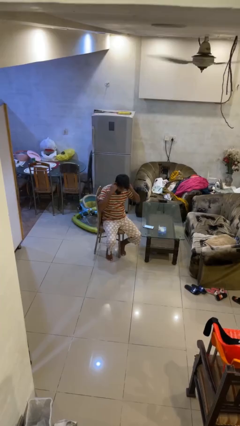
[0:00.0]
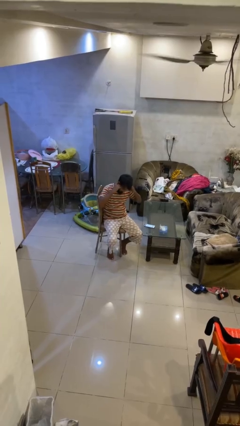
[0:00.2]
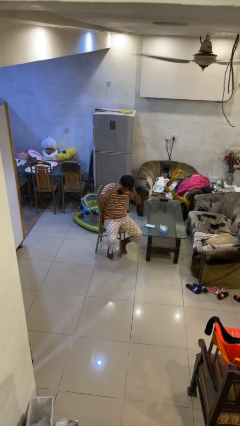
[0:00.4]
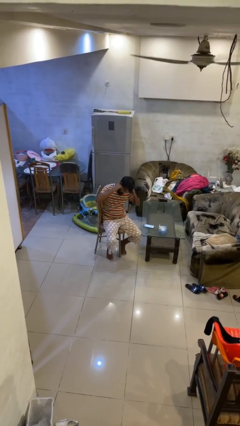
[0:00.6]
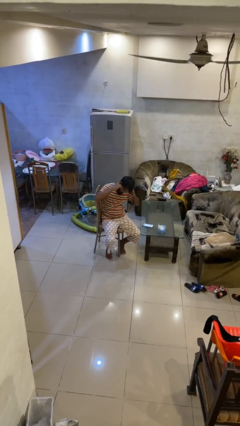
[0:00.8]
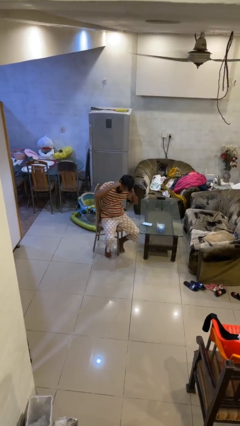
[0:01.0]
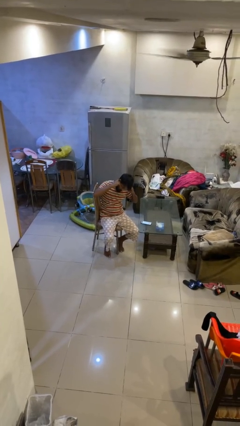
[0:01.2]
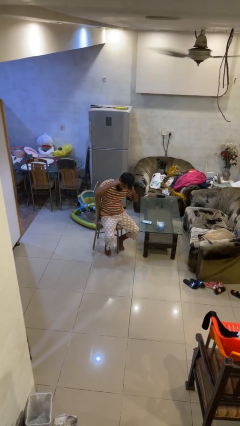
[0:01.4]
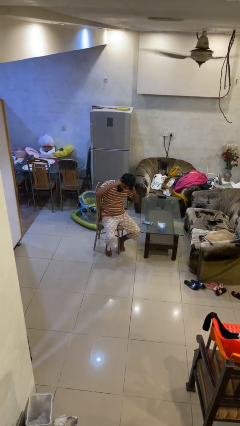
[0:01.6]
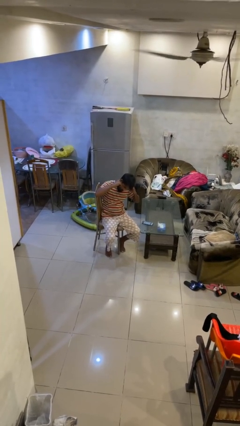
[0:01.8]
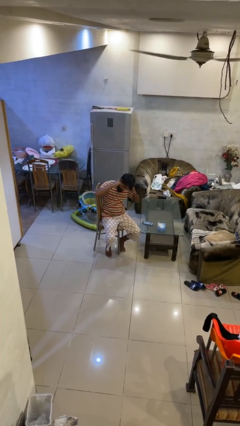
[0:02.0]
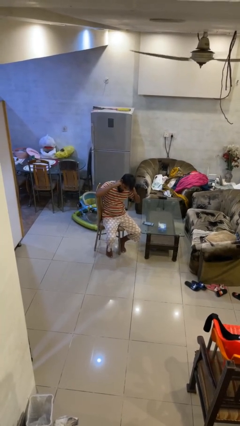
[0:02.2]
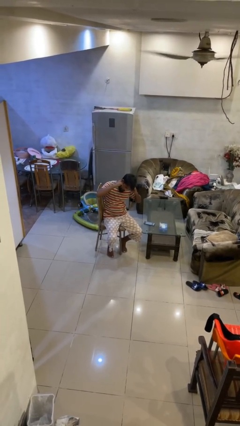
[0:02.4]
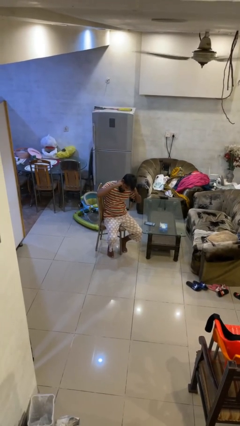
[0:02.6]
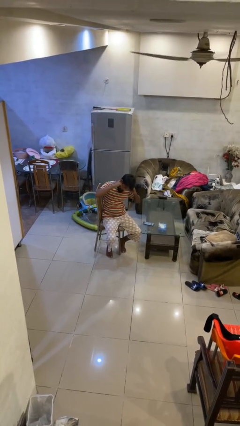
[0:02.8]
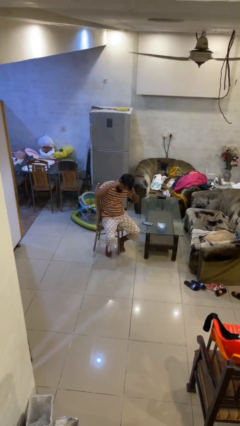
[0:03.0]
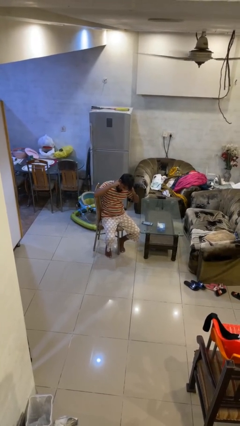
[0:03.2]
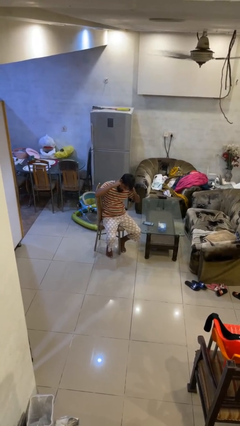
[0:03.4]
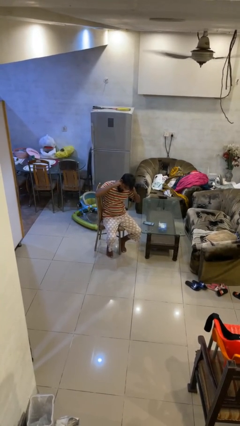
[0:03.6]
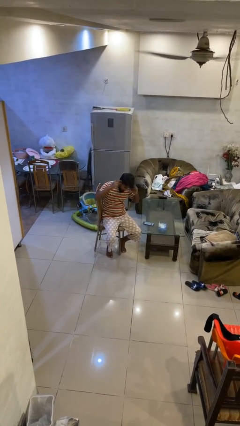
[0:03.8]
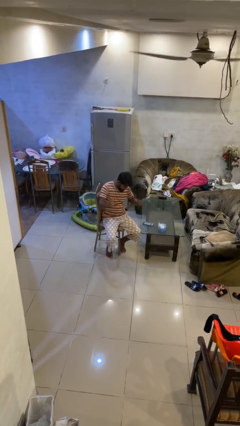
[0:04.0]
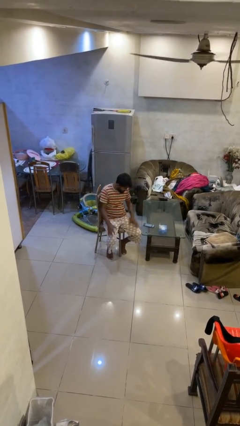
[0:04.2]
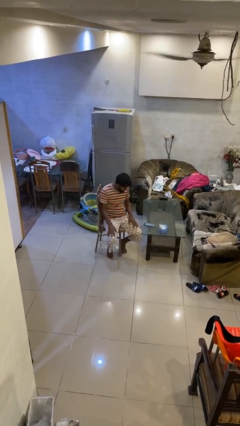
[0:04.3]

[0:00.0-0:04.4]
person puts fingers in ear

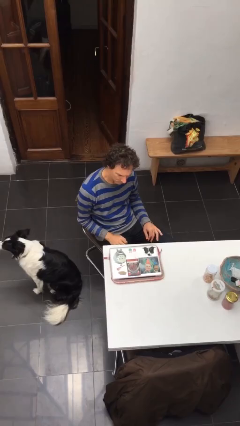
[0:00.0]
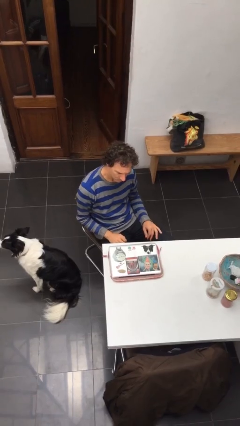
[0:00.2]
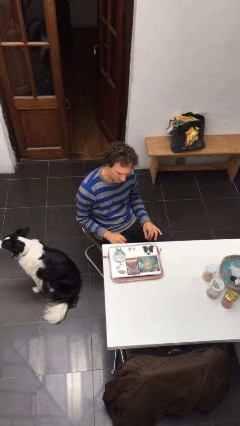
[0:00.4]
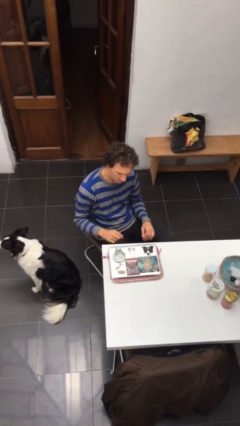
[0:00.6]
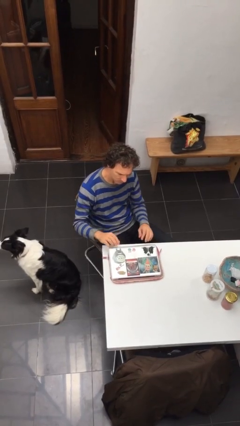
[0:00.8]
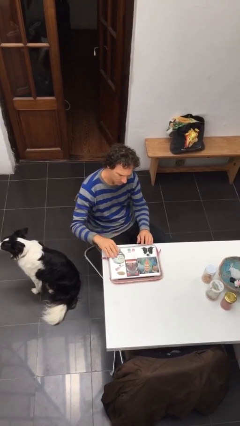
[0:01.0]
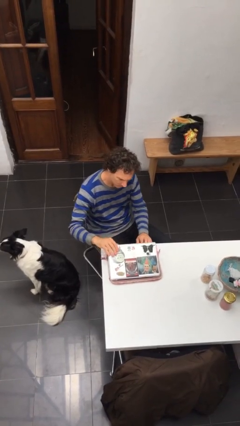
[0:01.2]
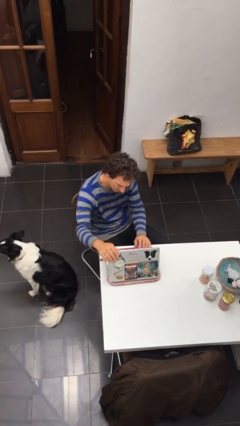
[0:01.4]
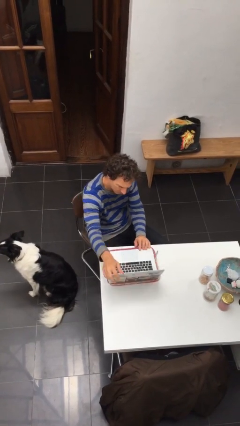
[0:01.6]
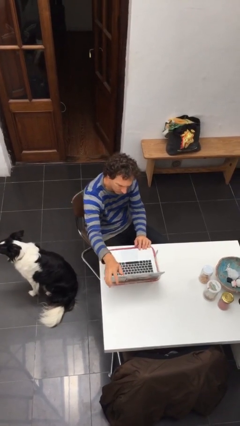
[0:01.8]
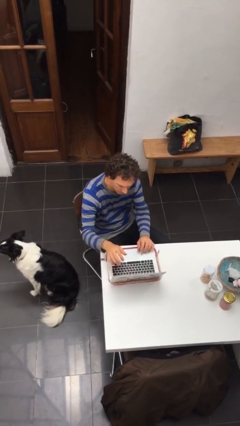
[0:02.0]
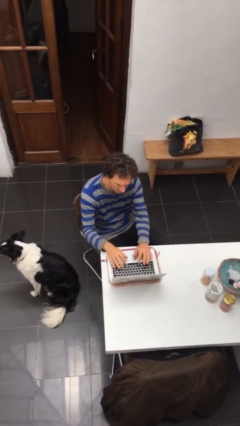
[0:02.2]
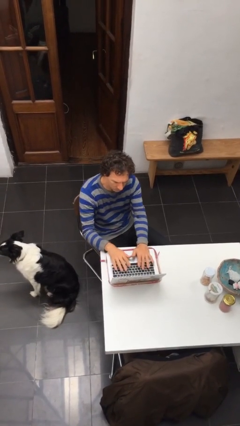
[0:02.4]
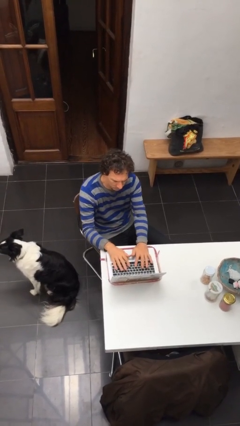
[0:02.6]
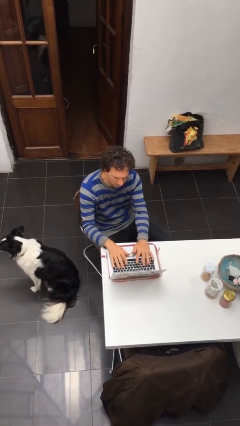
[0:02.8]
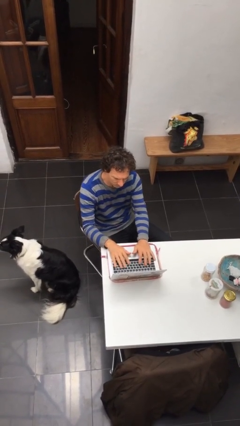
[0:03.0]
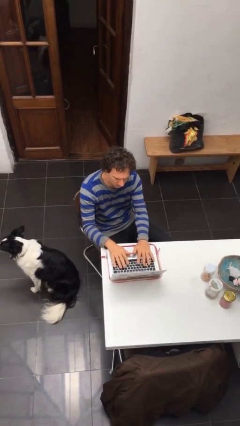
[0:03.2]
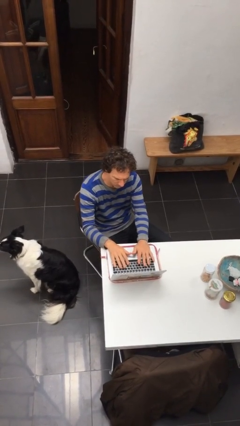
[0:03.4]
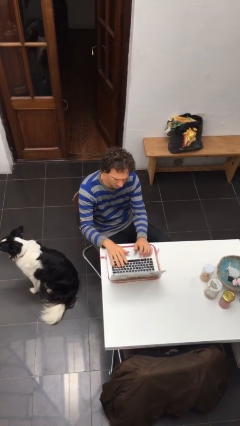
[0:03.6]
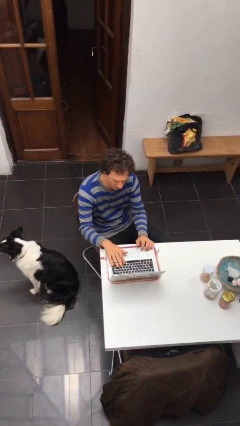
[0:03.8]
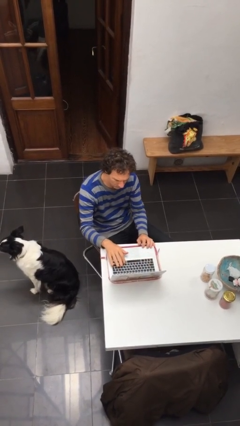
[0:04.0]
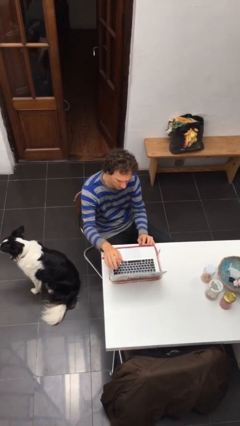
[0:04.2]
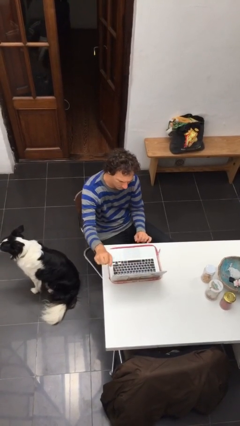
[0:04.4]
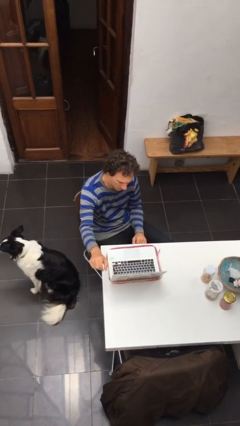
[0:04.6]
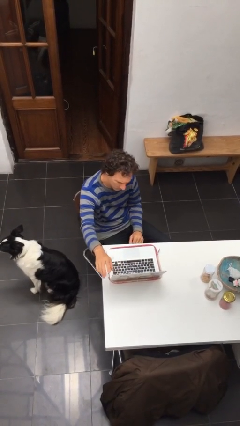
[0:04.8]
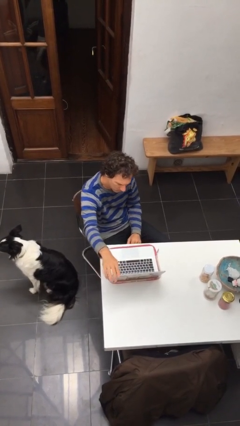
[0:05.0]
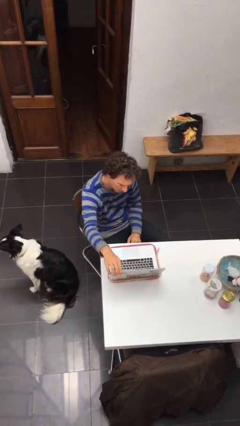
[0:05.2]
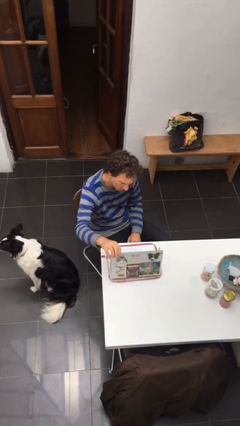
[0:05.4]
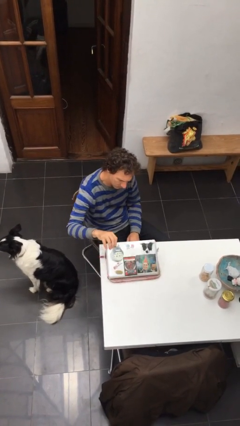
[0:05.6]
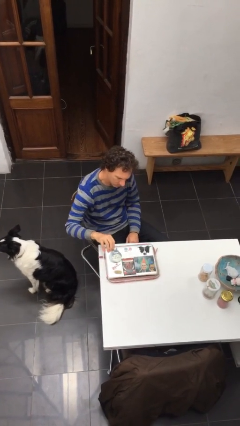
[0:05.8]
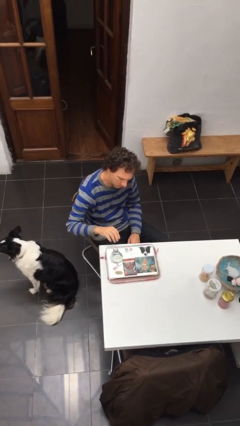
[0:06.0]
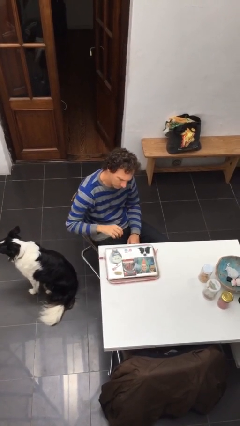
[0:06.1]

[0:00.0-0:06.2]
person interacts with laptop

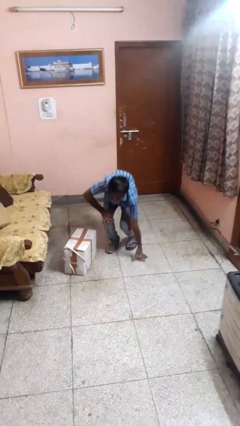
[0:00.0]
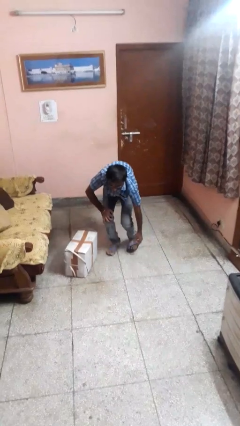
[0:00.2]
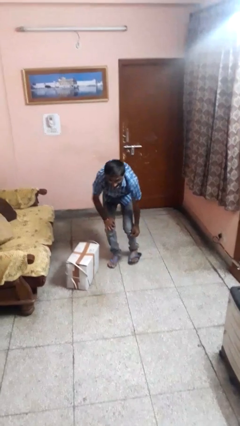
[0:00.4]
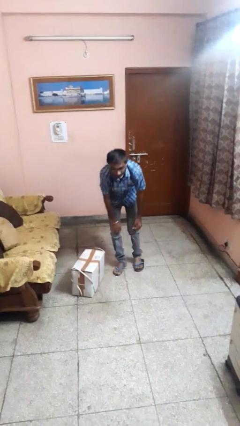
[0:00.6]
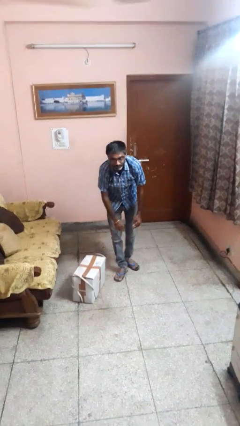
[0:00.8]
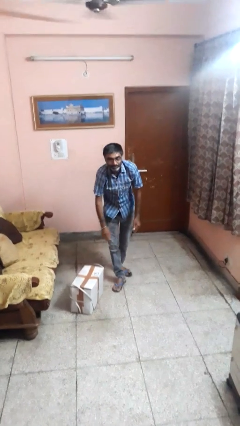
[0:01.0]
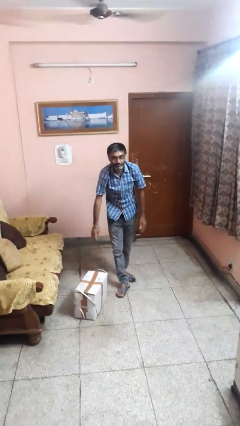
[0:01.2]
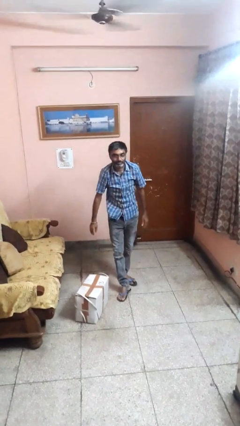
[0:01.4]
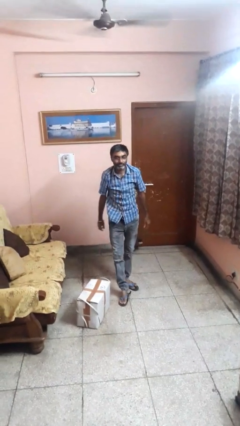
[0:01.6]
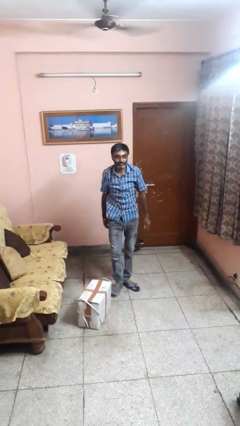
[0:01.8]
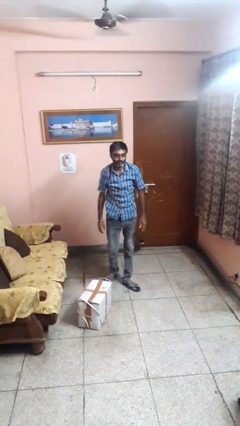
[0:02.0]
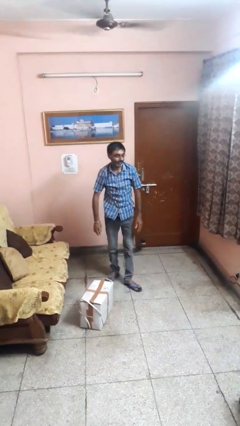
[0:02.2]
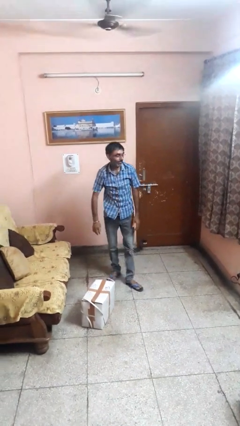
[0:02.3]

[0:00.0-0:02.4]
person stands up from floor

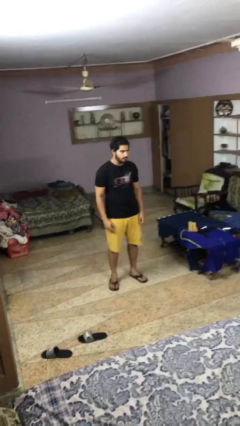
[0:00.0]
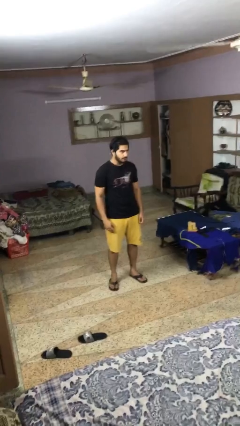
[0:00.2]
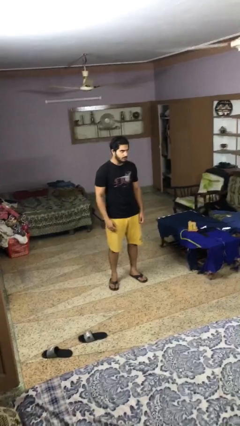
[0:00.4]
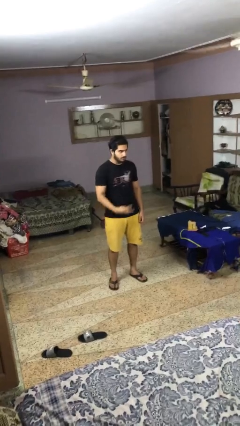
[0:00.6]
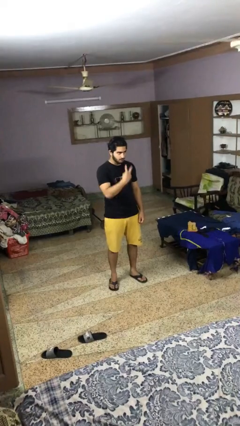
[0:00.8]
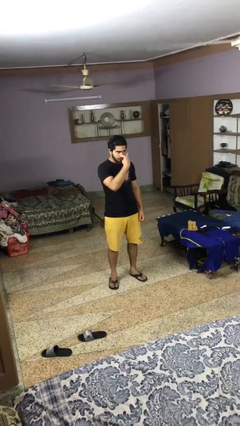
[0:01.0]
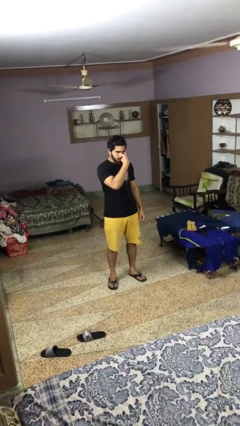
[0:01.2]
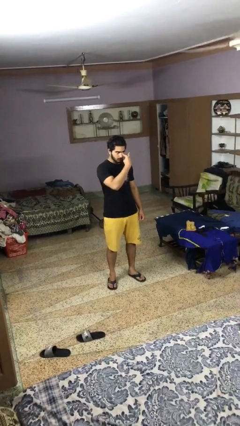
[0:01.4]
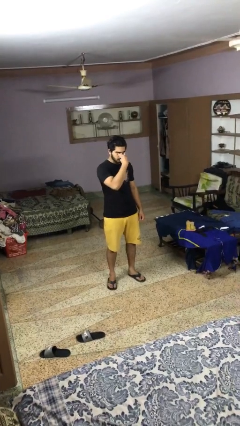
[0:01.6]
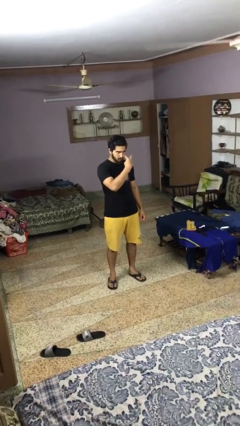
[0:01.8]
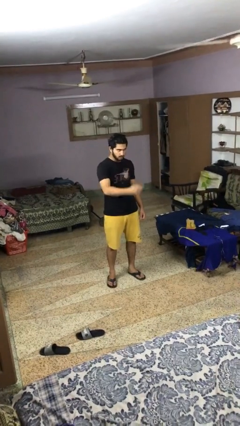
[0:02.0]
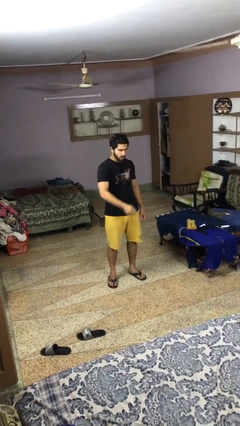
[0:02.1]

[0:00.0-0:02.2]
person gestures watch closely

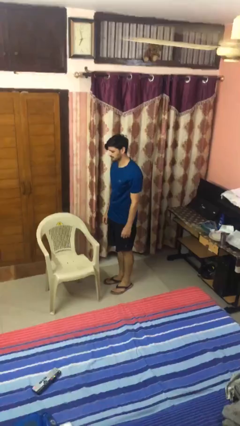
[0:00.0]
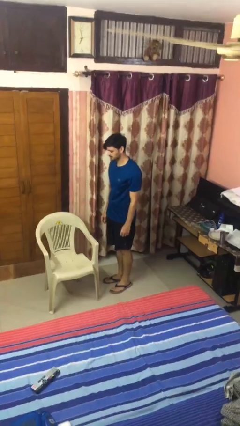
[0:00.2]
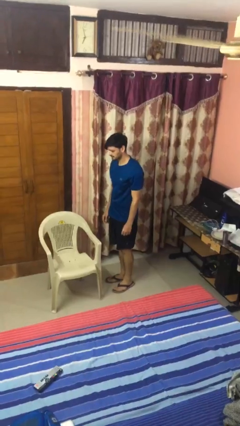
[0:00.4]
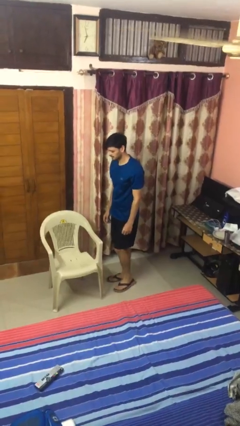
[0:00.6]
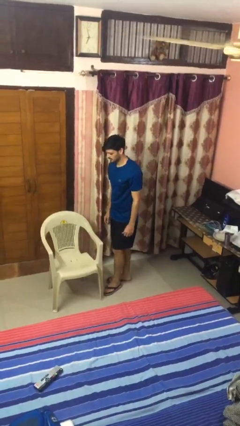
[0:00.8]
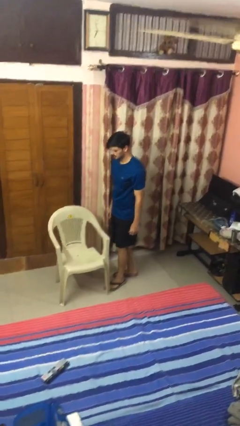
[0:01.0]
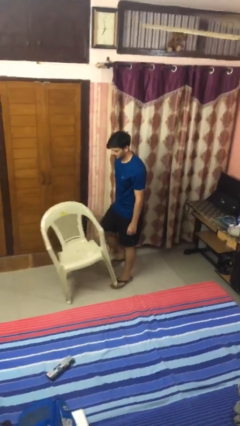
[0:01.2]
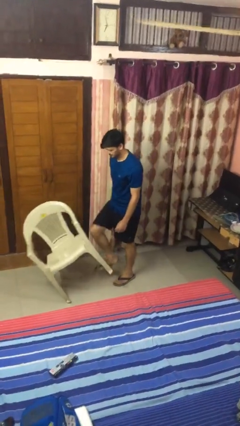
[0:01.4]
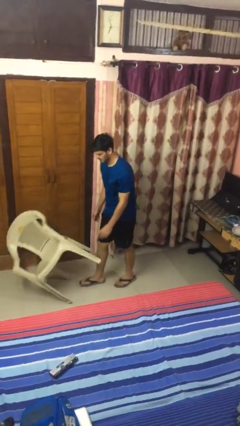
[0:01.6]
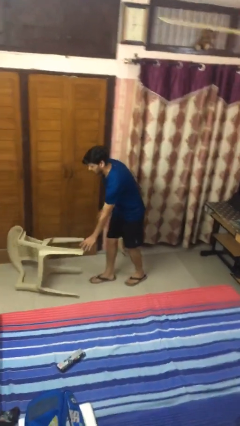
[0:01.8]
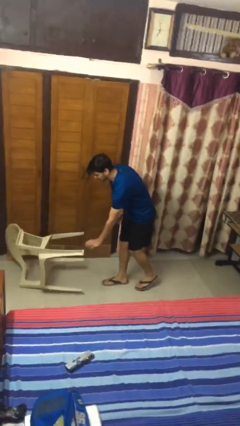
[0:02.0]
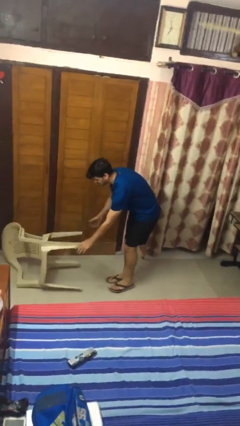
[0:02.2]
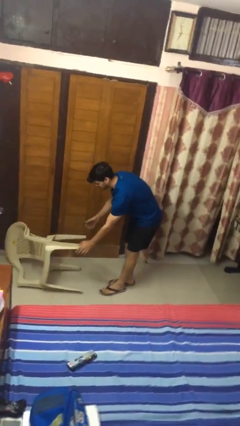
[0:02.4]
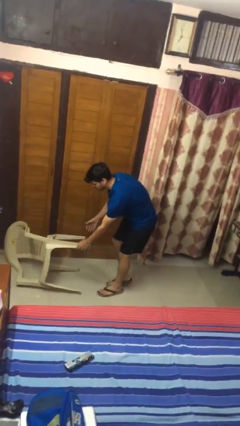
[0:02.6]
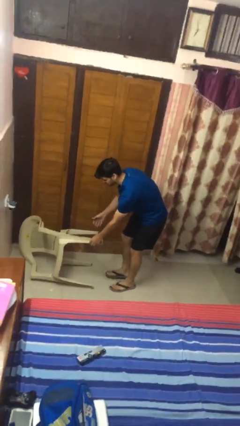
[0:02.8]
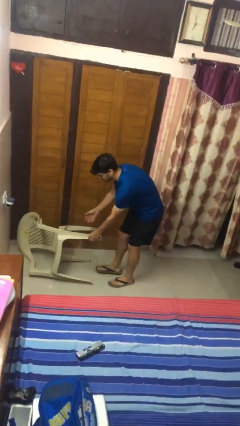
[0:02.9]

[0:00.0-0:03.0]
person knocks over furniture
